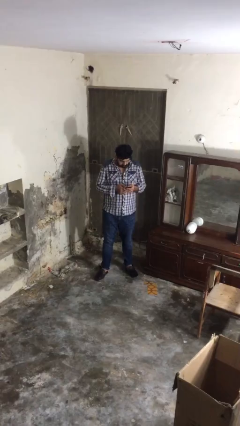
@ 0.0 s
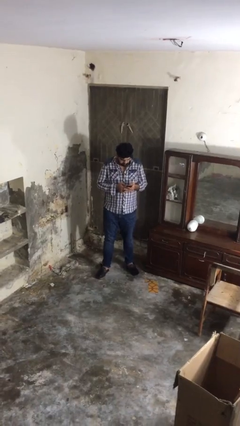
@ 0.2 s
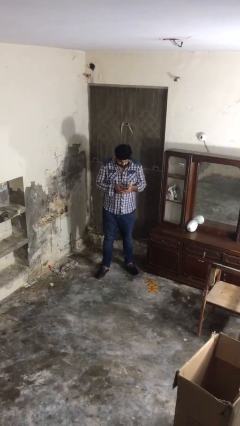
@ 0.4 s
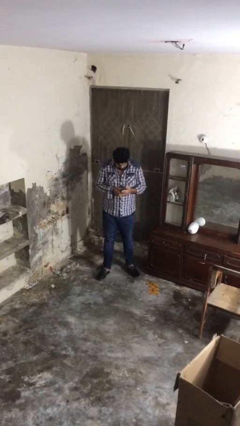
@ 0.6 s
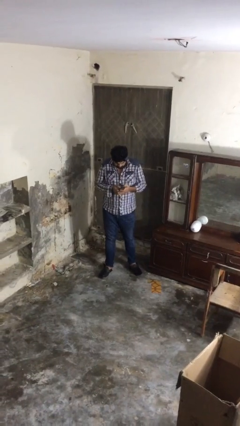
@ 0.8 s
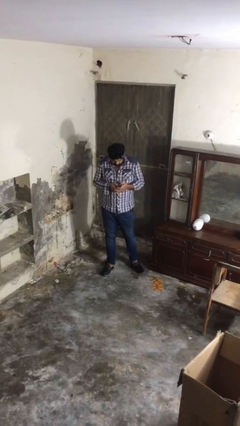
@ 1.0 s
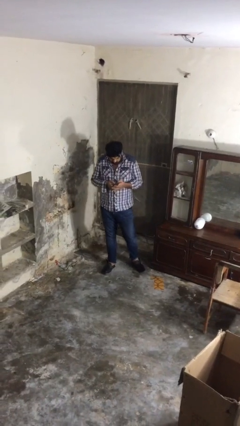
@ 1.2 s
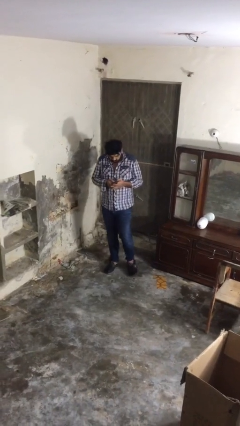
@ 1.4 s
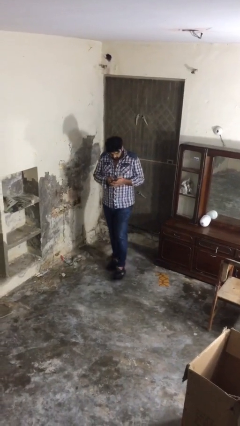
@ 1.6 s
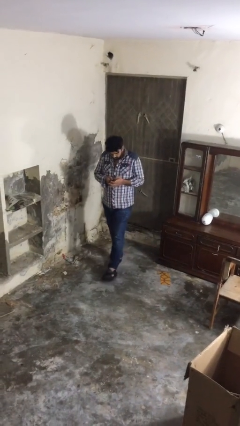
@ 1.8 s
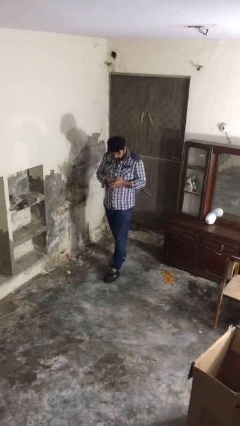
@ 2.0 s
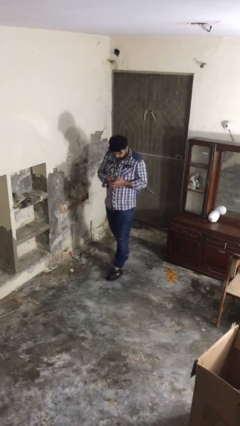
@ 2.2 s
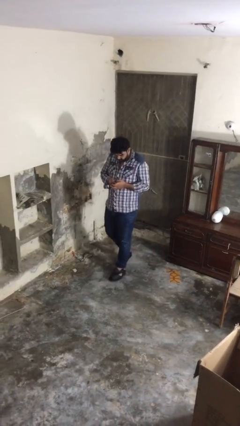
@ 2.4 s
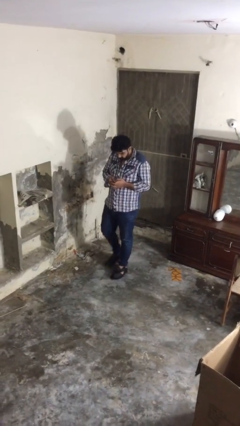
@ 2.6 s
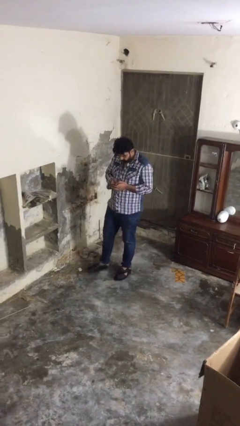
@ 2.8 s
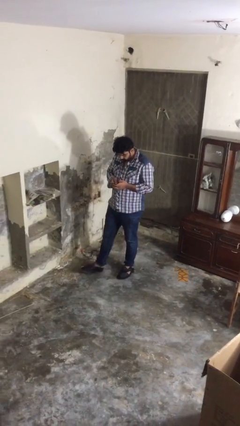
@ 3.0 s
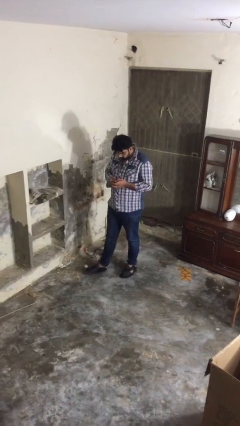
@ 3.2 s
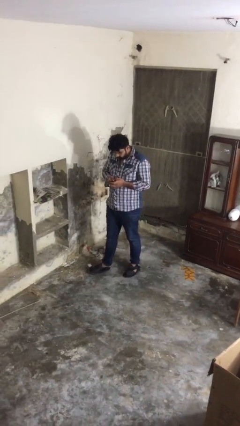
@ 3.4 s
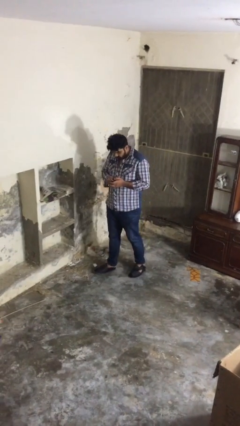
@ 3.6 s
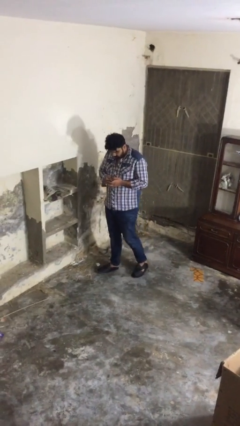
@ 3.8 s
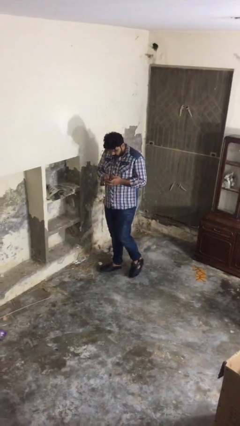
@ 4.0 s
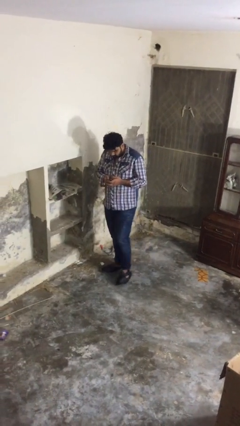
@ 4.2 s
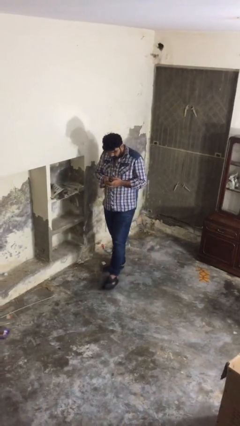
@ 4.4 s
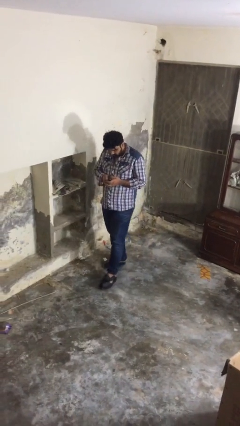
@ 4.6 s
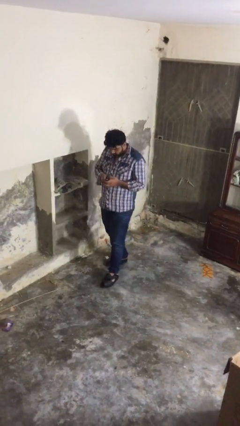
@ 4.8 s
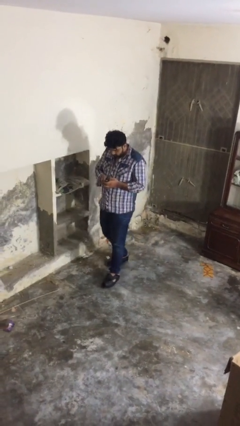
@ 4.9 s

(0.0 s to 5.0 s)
person texts on phone

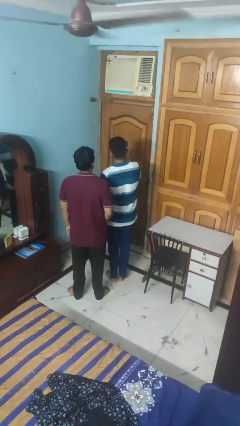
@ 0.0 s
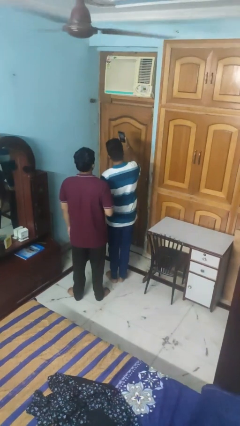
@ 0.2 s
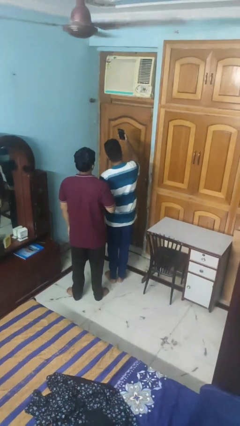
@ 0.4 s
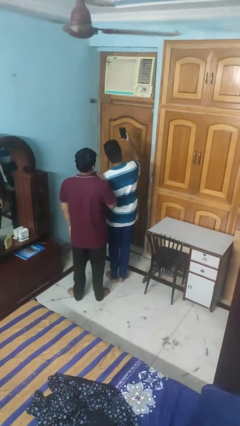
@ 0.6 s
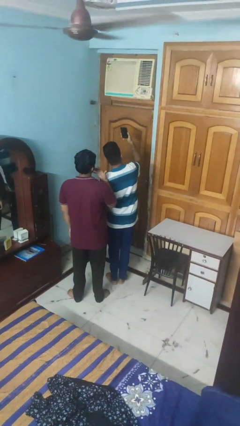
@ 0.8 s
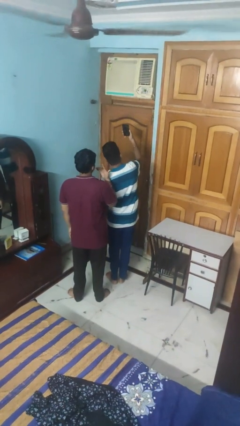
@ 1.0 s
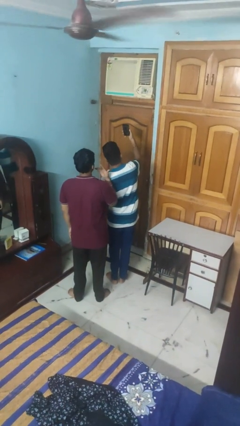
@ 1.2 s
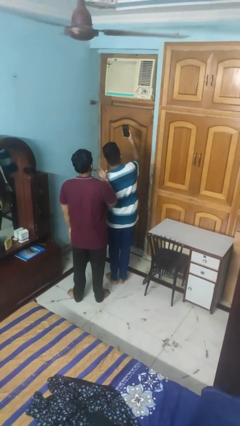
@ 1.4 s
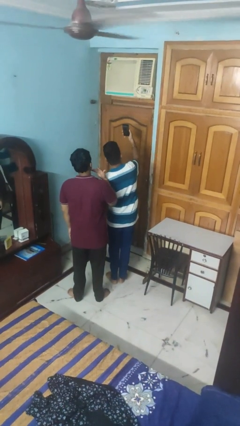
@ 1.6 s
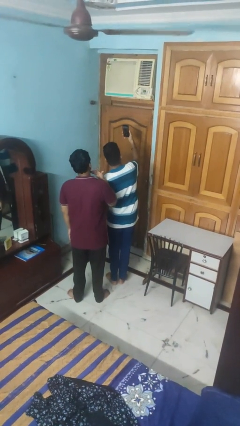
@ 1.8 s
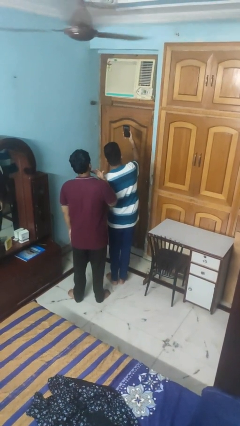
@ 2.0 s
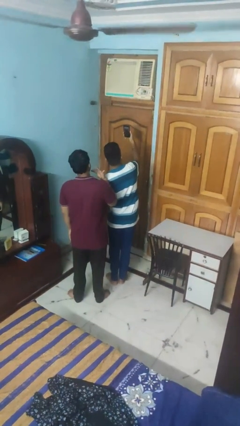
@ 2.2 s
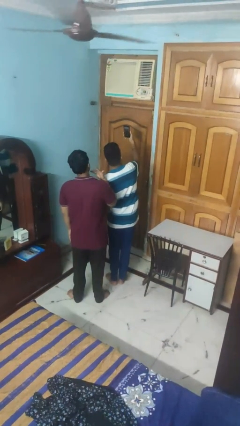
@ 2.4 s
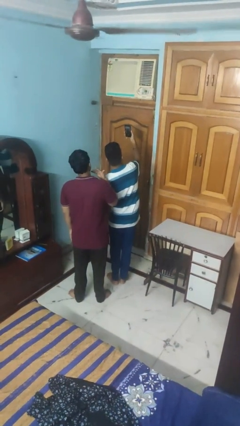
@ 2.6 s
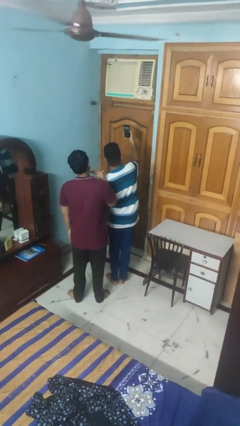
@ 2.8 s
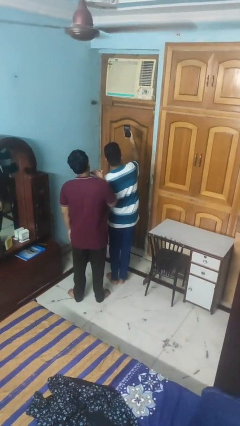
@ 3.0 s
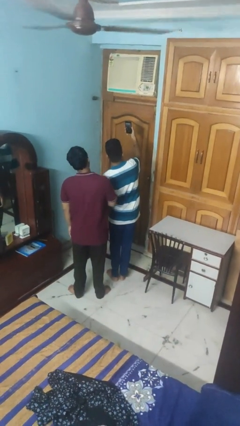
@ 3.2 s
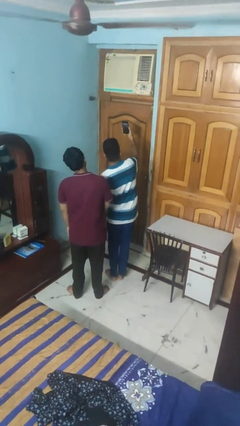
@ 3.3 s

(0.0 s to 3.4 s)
person takes selfie with person

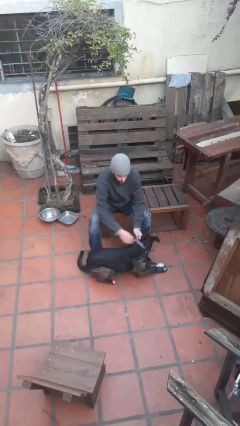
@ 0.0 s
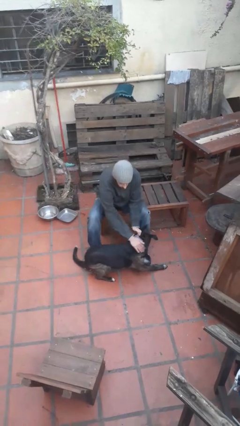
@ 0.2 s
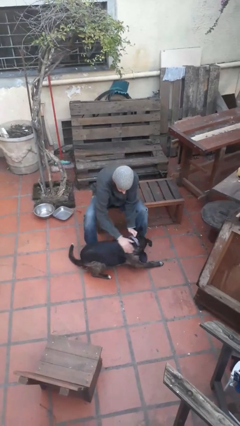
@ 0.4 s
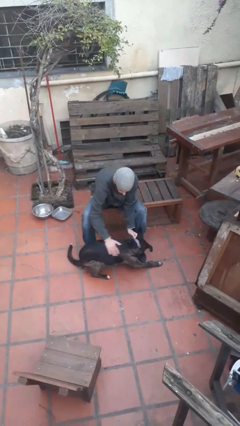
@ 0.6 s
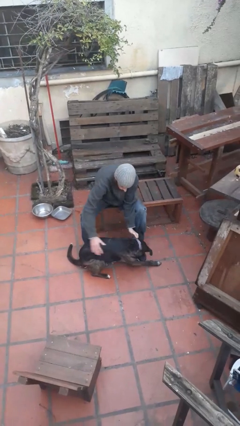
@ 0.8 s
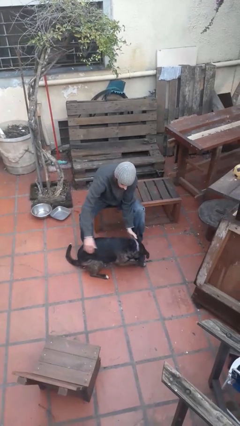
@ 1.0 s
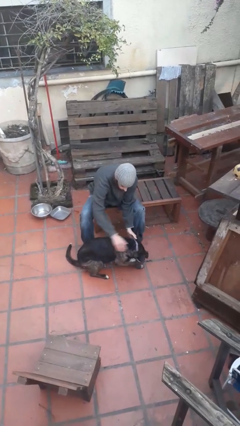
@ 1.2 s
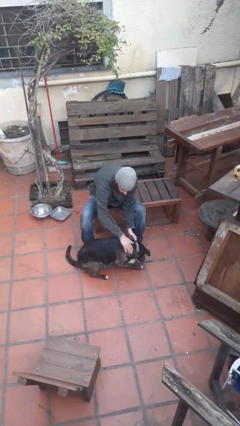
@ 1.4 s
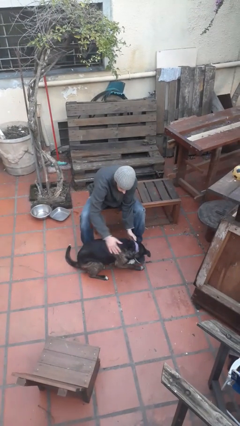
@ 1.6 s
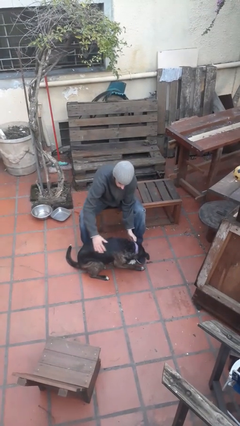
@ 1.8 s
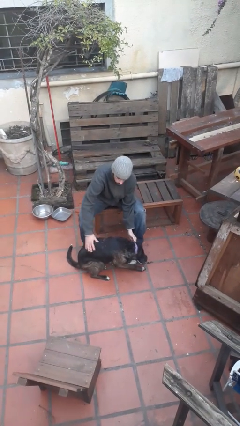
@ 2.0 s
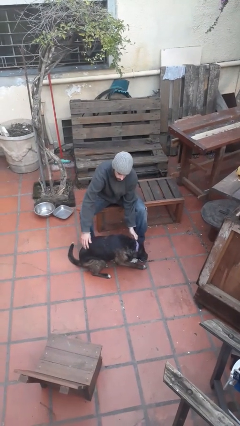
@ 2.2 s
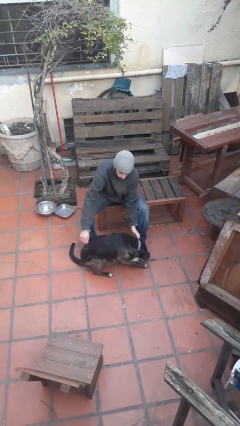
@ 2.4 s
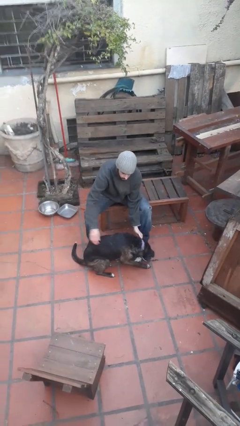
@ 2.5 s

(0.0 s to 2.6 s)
person pets dog

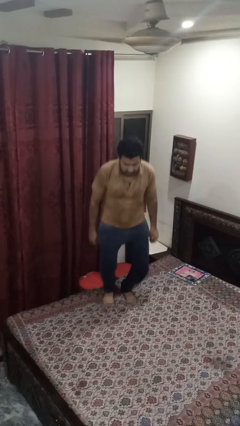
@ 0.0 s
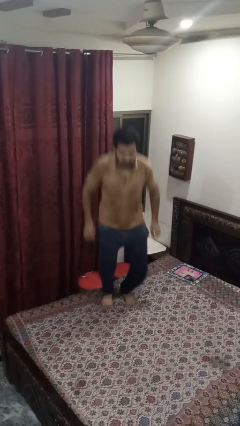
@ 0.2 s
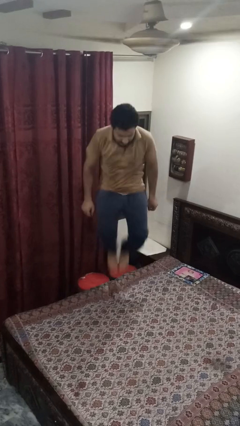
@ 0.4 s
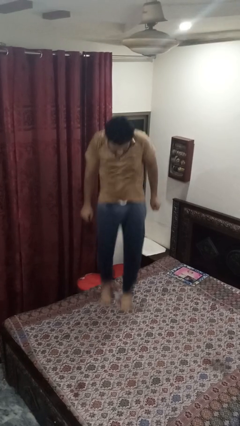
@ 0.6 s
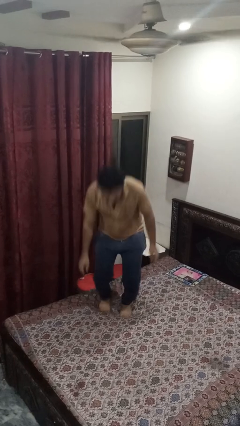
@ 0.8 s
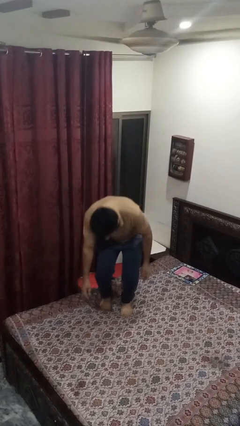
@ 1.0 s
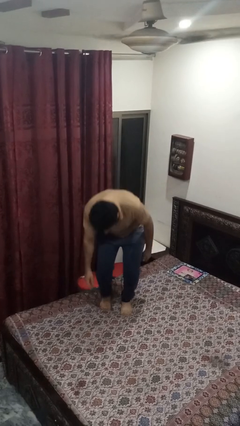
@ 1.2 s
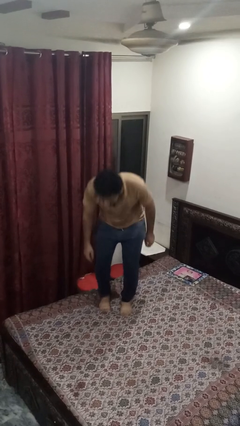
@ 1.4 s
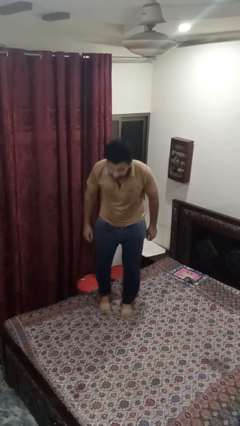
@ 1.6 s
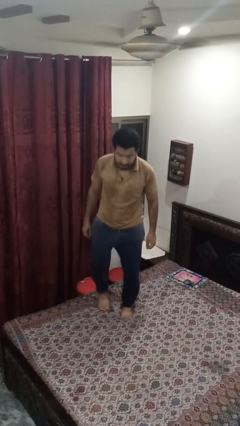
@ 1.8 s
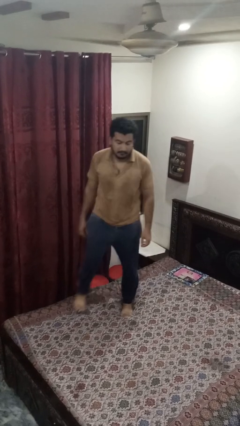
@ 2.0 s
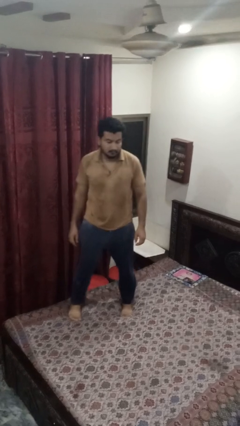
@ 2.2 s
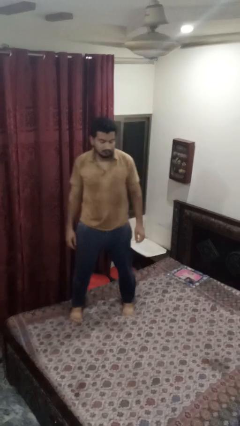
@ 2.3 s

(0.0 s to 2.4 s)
person jumps on bed

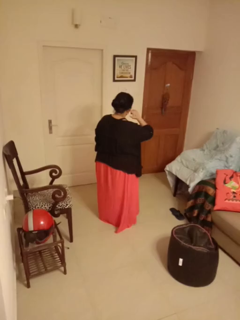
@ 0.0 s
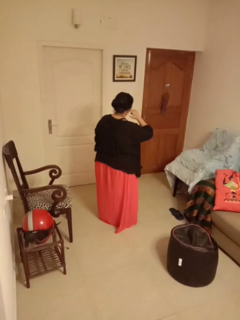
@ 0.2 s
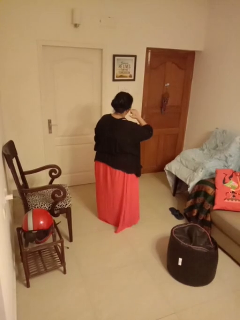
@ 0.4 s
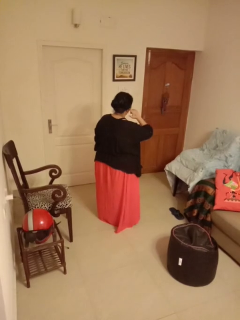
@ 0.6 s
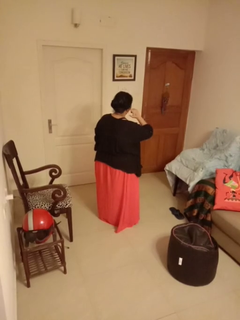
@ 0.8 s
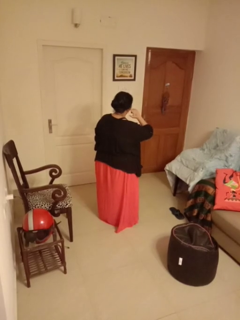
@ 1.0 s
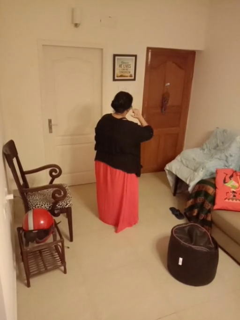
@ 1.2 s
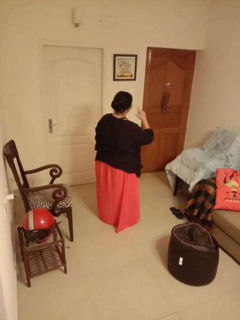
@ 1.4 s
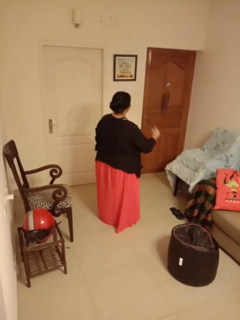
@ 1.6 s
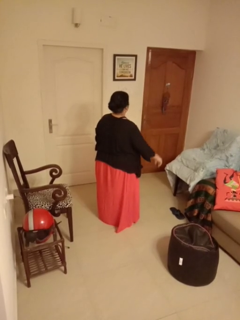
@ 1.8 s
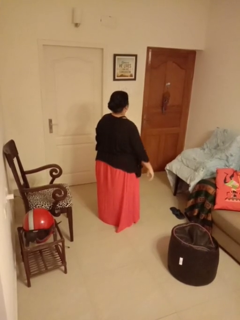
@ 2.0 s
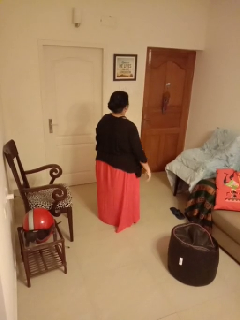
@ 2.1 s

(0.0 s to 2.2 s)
person gestures listen closely

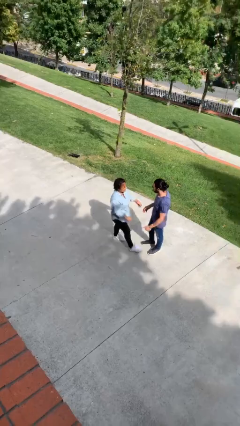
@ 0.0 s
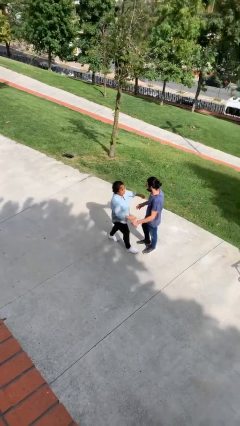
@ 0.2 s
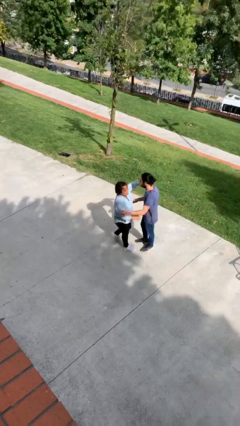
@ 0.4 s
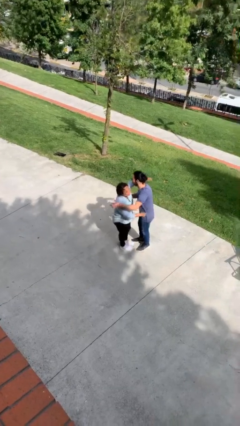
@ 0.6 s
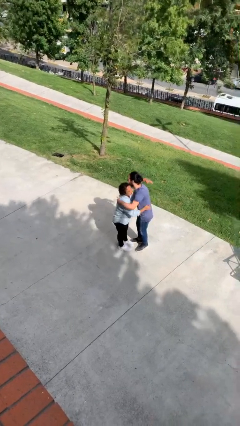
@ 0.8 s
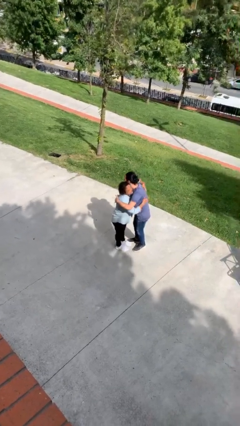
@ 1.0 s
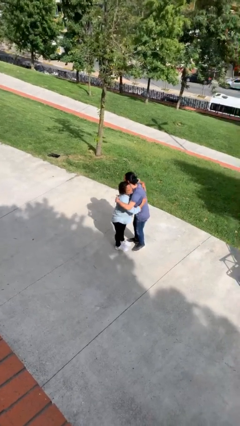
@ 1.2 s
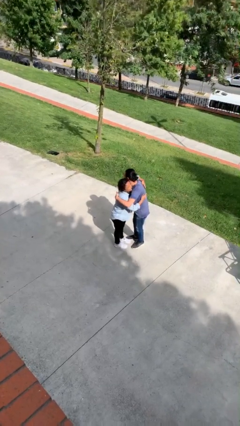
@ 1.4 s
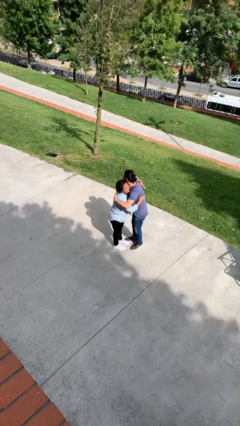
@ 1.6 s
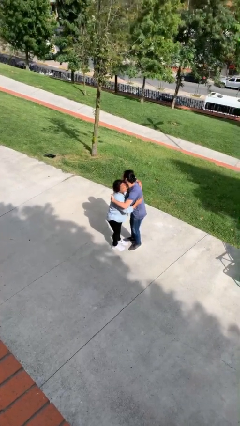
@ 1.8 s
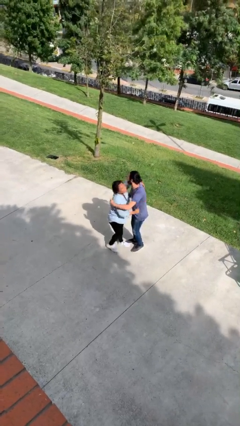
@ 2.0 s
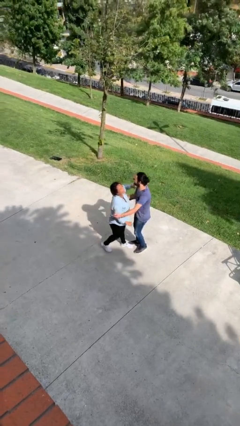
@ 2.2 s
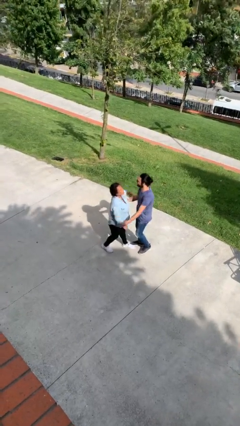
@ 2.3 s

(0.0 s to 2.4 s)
person embraces person
